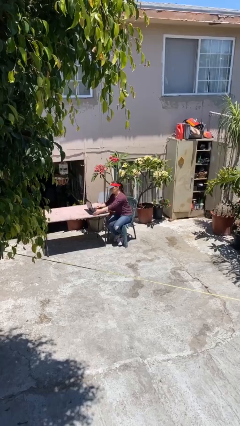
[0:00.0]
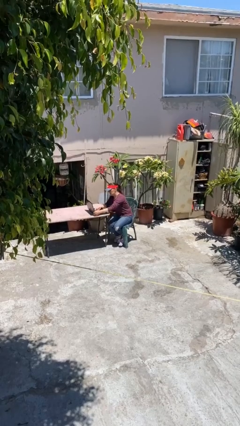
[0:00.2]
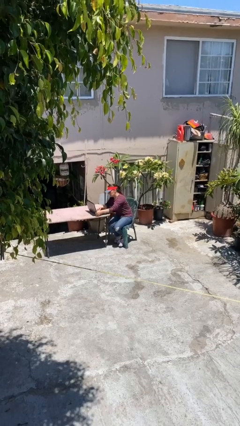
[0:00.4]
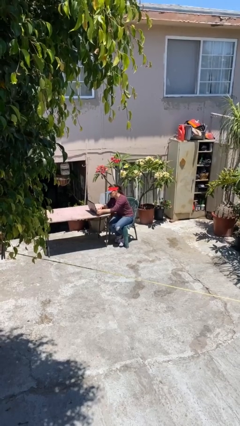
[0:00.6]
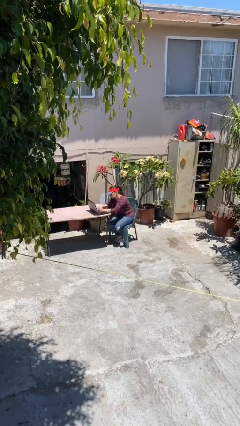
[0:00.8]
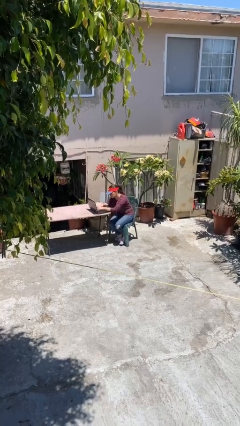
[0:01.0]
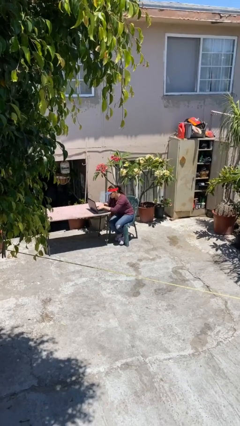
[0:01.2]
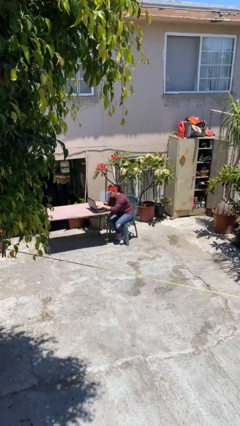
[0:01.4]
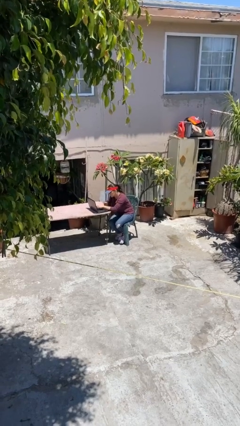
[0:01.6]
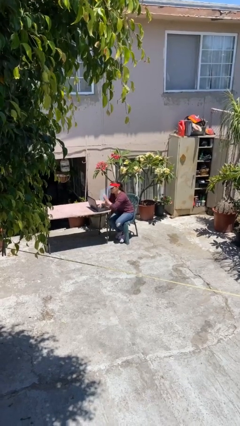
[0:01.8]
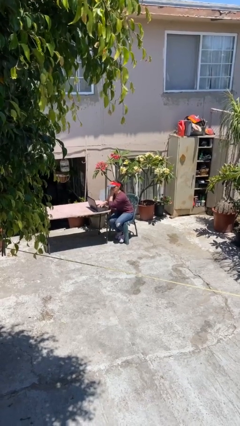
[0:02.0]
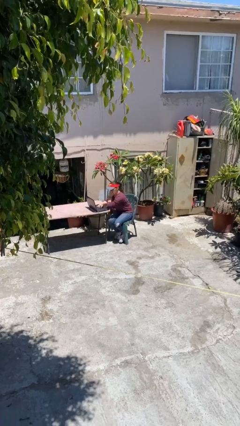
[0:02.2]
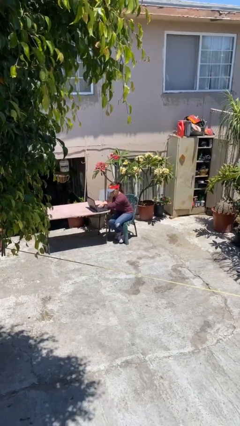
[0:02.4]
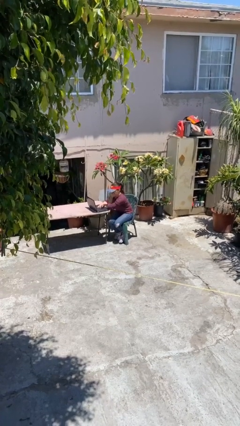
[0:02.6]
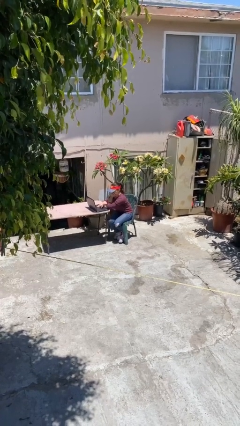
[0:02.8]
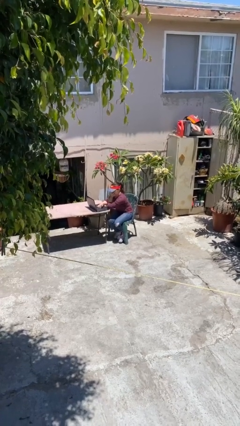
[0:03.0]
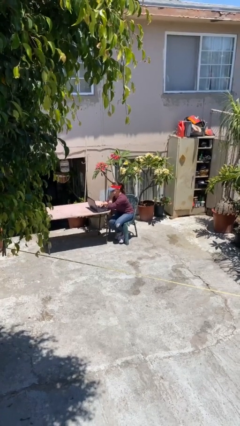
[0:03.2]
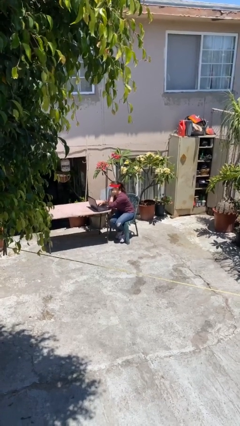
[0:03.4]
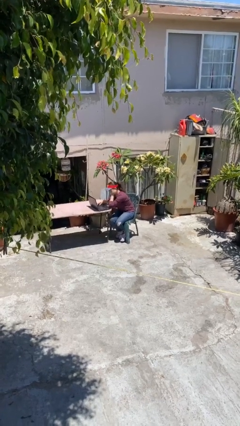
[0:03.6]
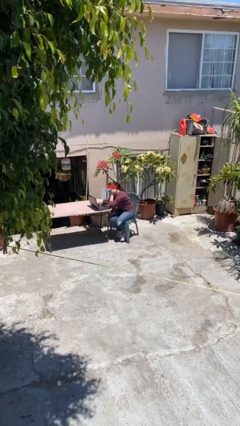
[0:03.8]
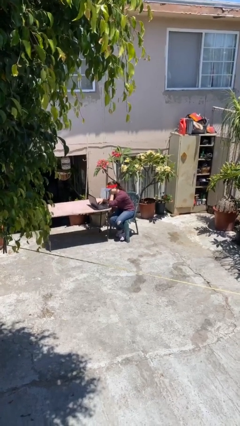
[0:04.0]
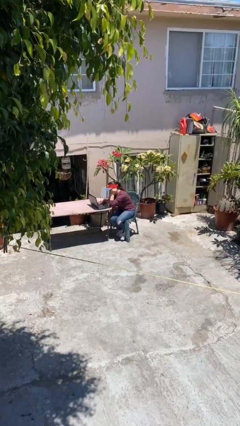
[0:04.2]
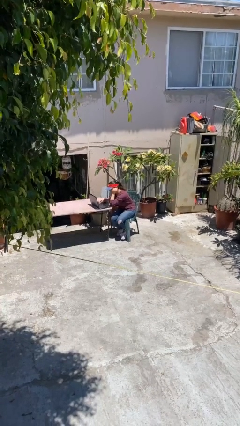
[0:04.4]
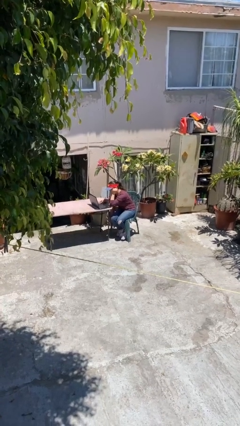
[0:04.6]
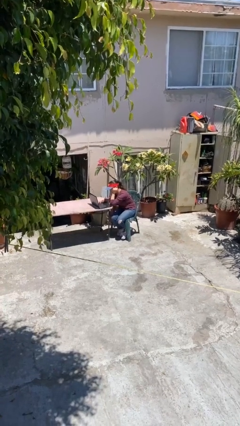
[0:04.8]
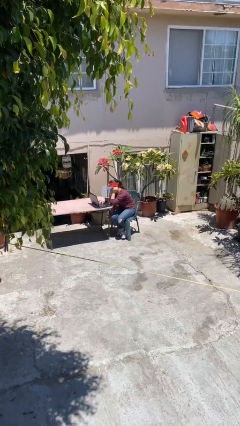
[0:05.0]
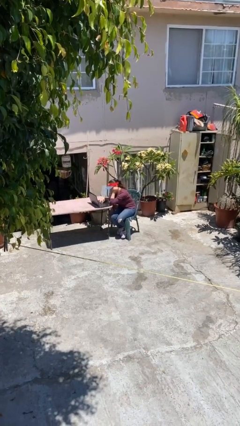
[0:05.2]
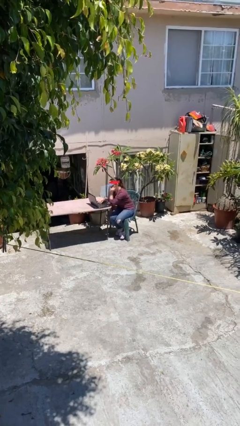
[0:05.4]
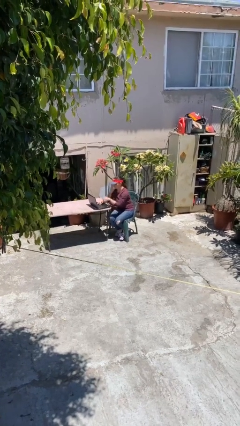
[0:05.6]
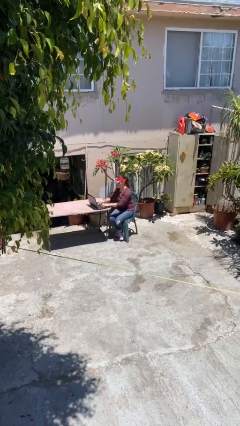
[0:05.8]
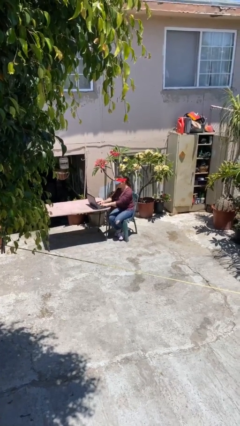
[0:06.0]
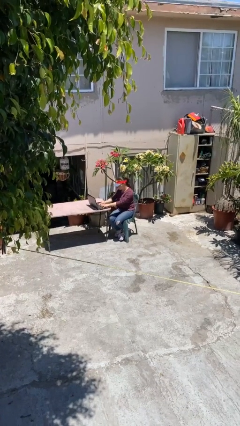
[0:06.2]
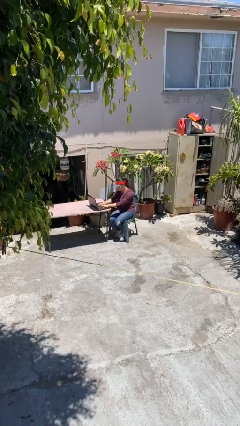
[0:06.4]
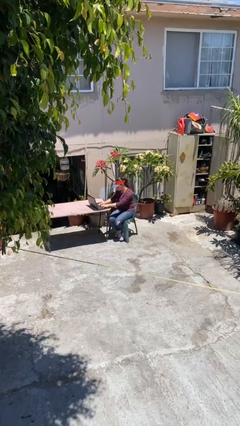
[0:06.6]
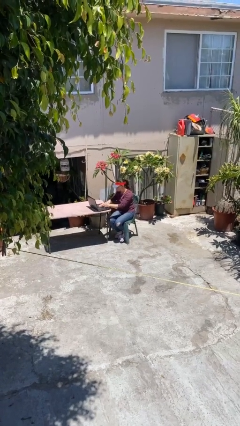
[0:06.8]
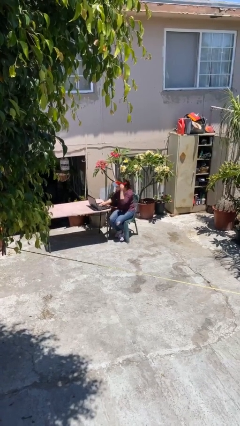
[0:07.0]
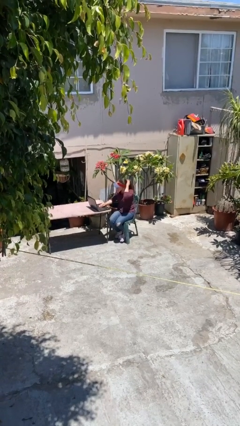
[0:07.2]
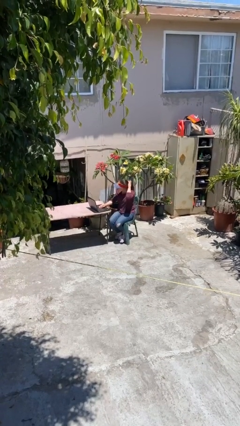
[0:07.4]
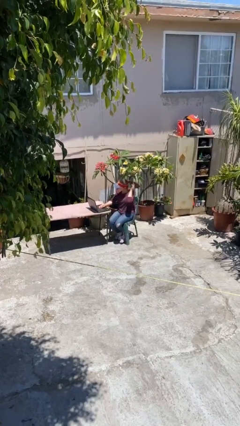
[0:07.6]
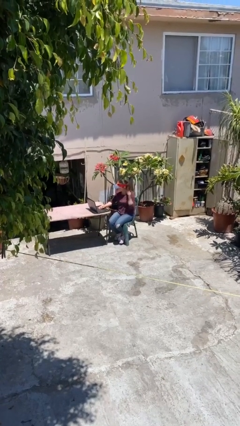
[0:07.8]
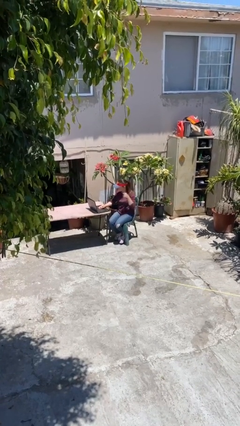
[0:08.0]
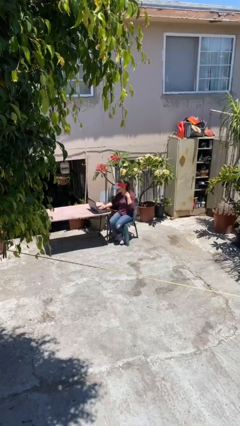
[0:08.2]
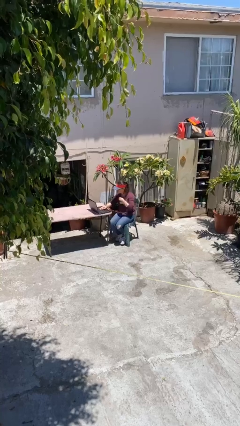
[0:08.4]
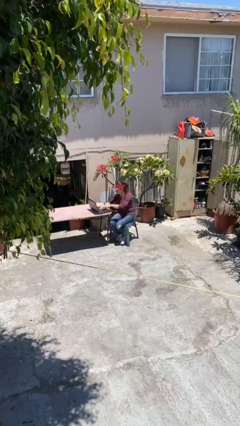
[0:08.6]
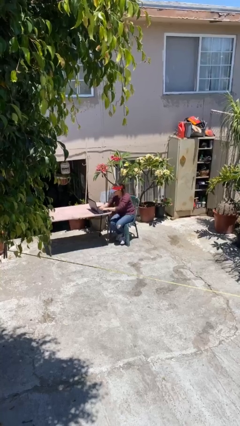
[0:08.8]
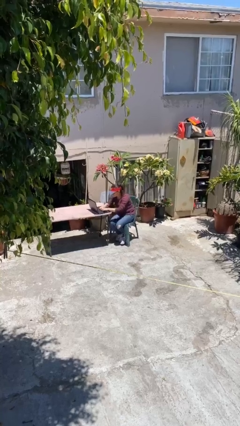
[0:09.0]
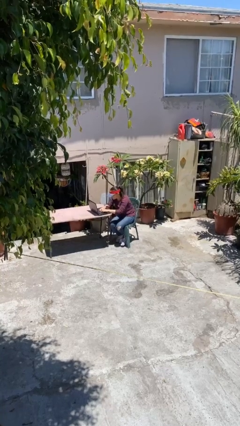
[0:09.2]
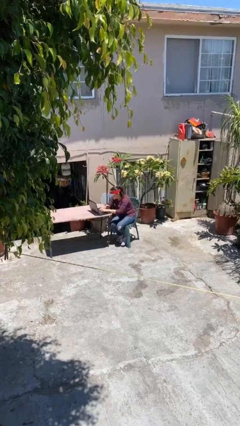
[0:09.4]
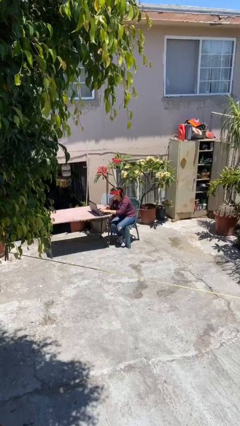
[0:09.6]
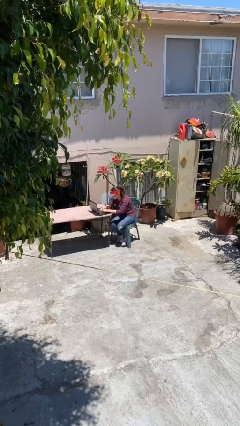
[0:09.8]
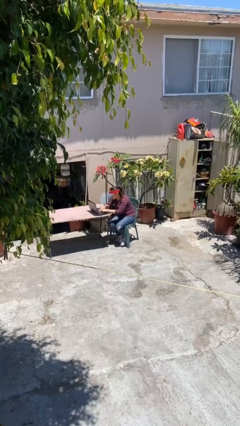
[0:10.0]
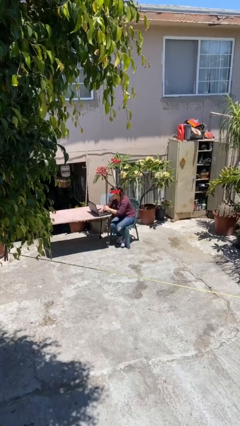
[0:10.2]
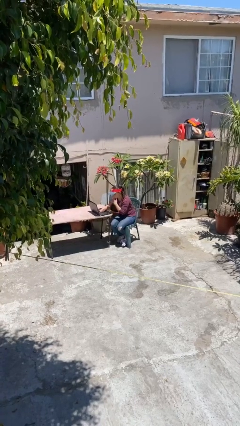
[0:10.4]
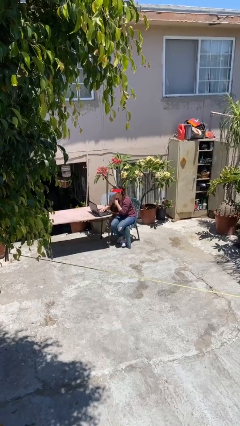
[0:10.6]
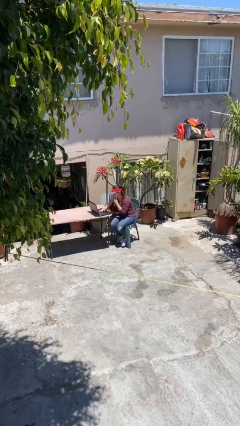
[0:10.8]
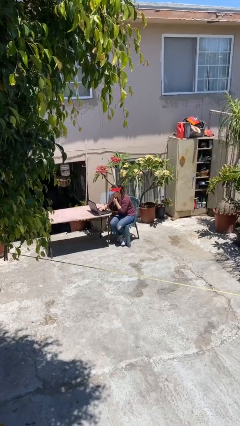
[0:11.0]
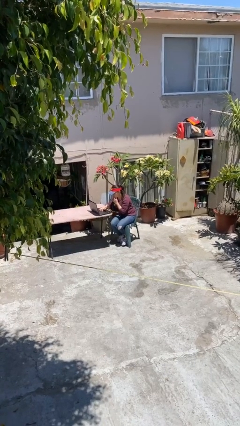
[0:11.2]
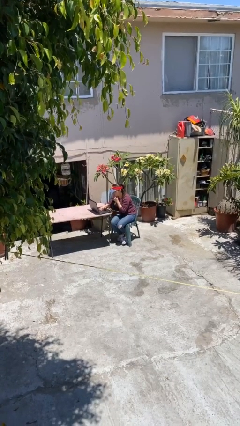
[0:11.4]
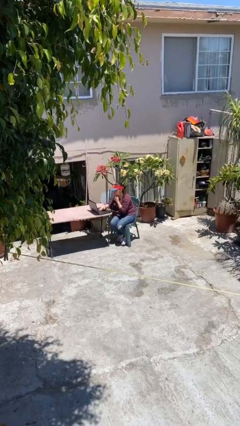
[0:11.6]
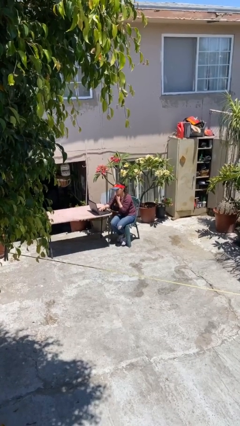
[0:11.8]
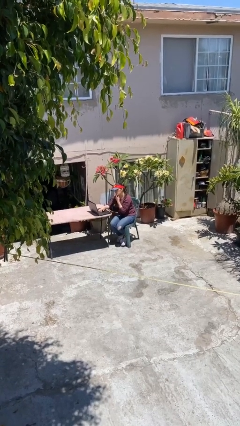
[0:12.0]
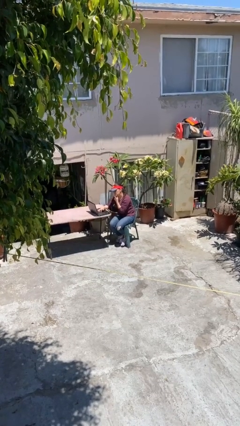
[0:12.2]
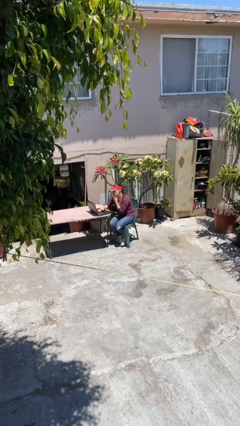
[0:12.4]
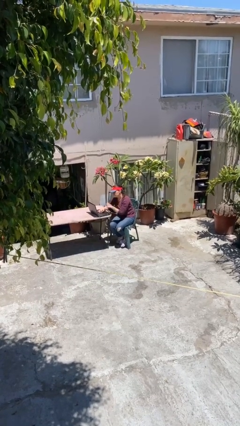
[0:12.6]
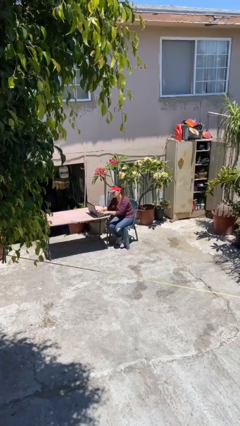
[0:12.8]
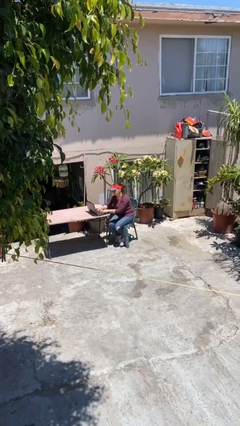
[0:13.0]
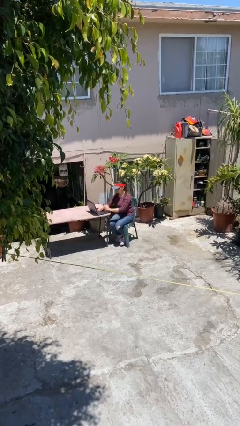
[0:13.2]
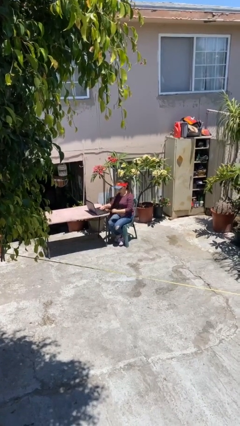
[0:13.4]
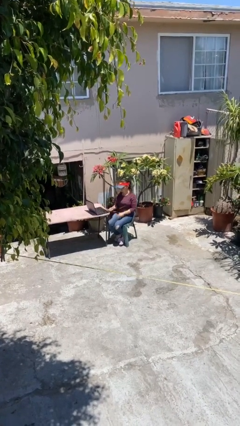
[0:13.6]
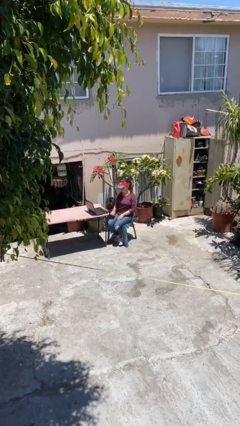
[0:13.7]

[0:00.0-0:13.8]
person interacts with laptop

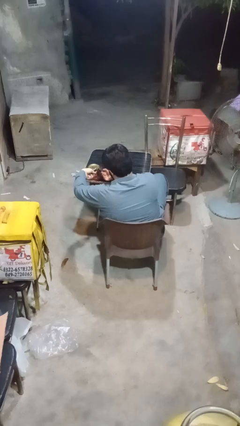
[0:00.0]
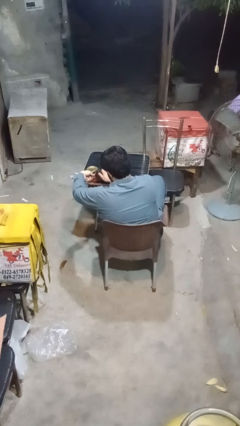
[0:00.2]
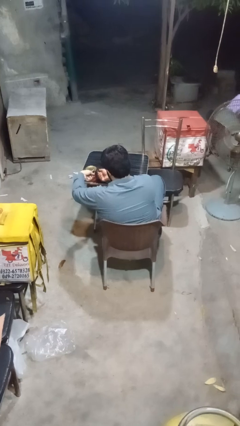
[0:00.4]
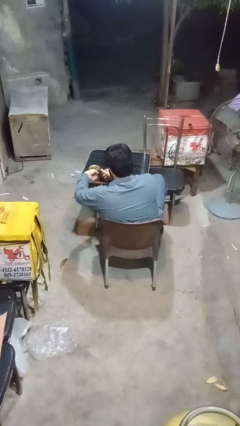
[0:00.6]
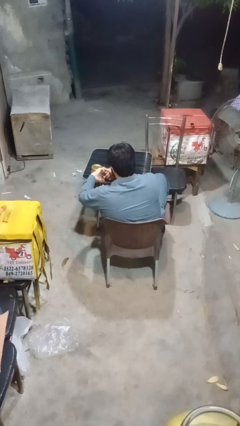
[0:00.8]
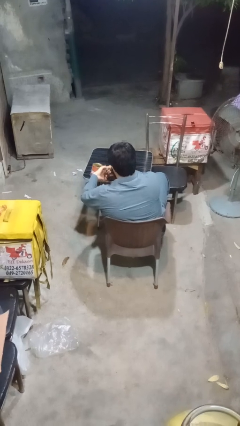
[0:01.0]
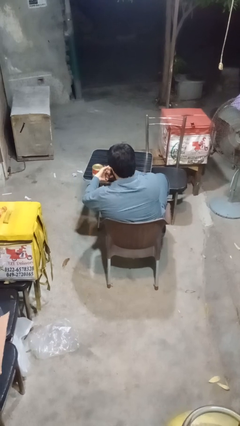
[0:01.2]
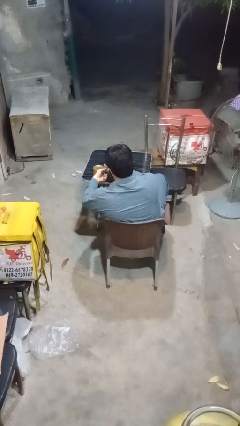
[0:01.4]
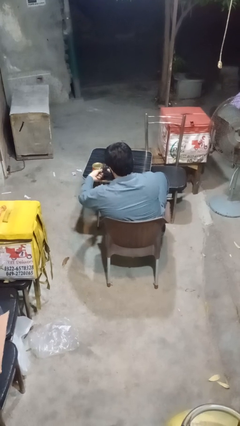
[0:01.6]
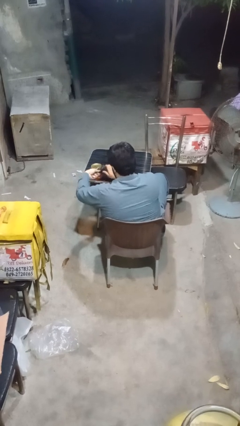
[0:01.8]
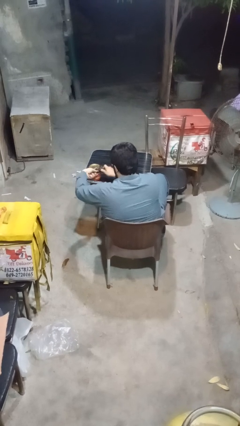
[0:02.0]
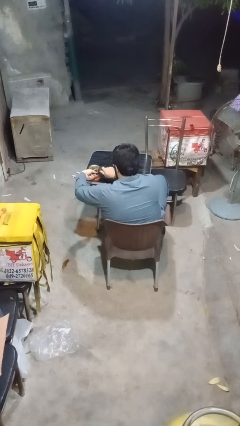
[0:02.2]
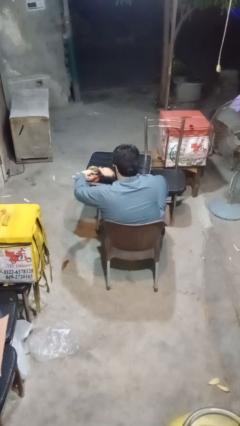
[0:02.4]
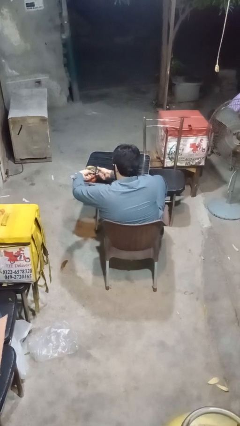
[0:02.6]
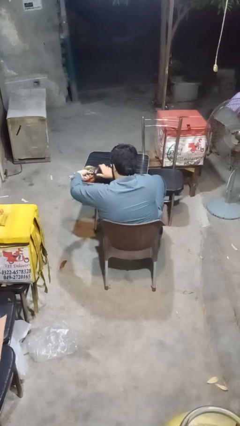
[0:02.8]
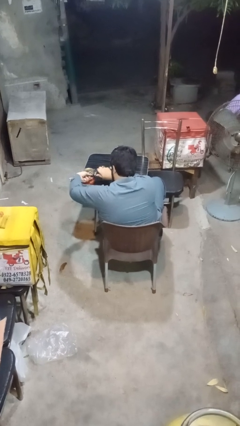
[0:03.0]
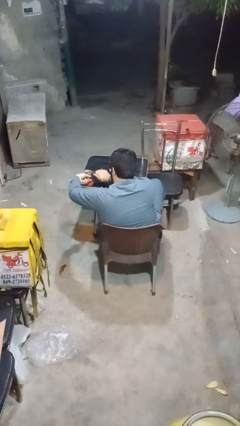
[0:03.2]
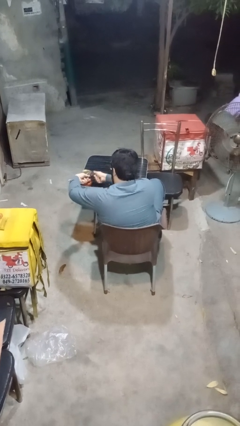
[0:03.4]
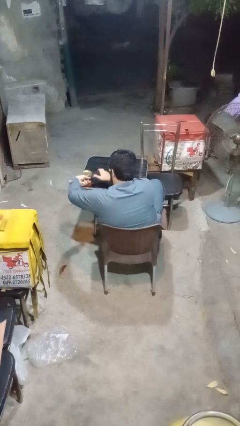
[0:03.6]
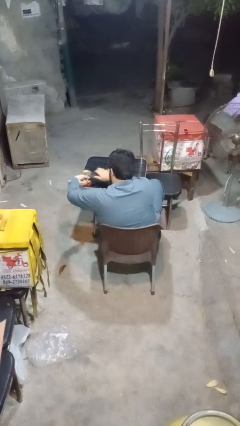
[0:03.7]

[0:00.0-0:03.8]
person opens can with can opener

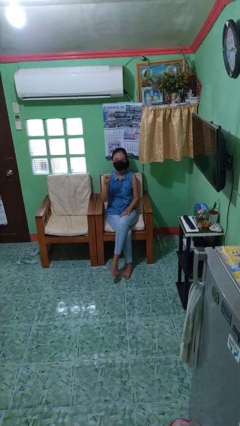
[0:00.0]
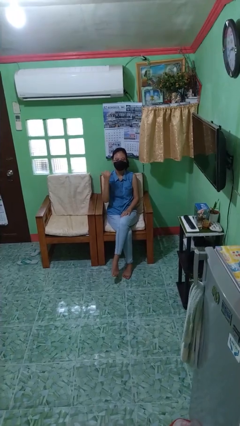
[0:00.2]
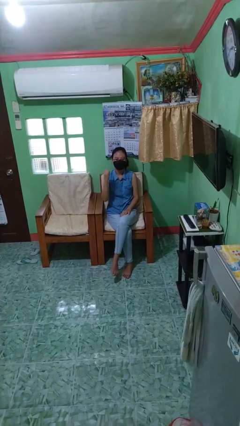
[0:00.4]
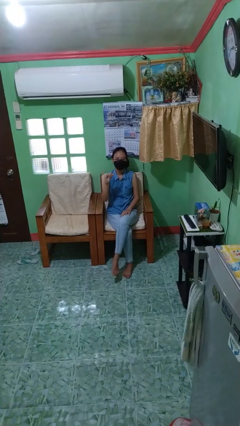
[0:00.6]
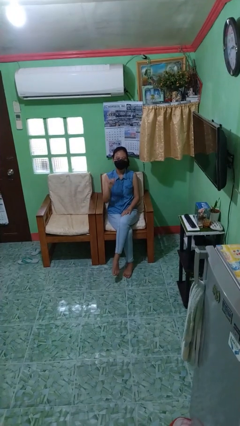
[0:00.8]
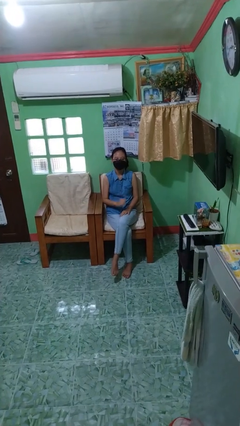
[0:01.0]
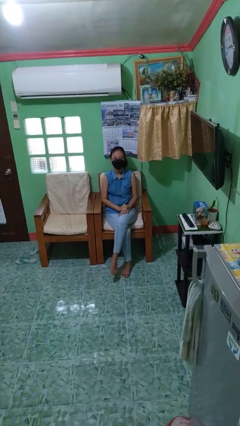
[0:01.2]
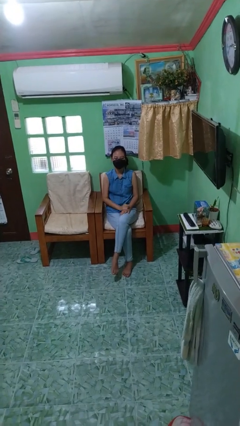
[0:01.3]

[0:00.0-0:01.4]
person gestures hang loose
